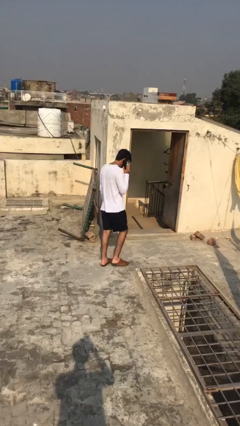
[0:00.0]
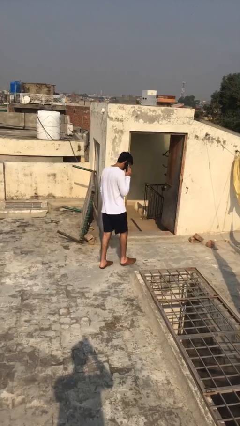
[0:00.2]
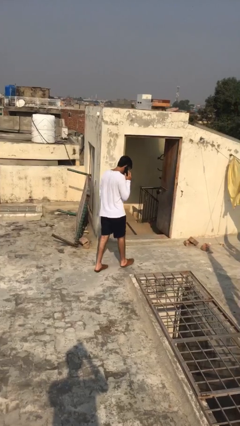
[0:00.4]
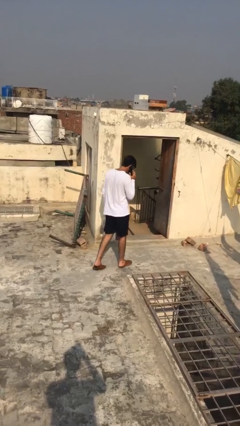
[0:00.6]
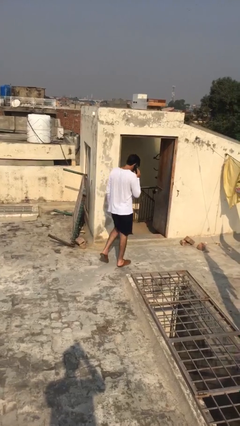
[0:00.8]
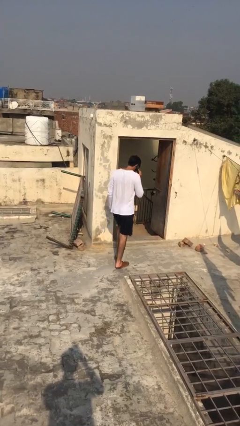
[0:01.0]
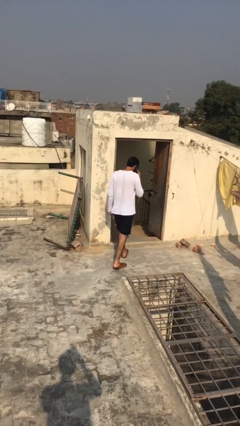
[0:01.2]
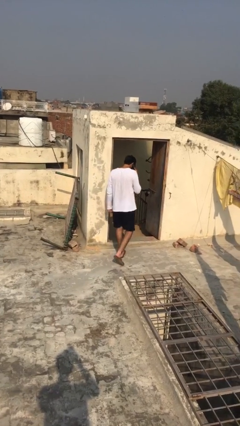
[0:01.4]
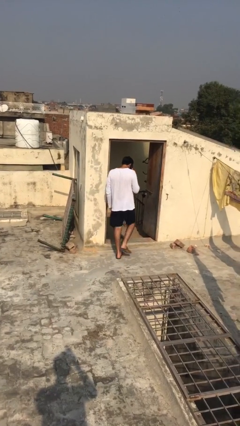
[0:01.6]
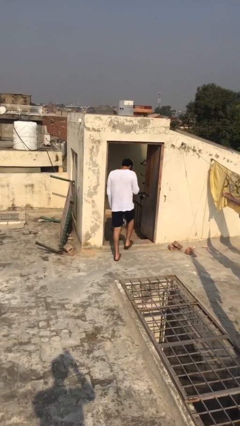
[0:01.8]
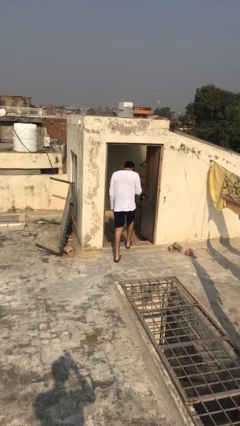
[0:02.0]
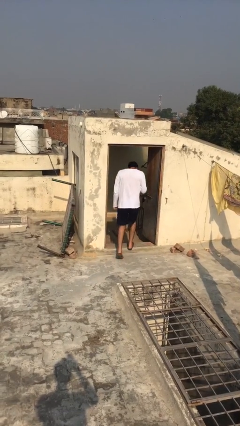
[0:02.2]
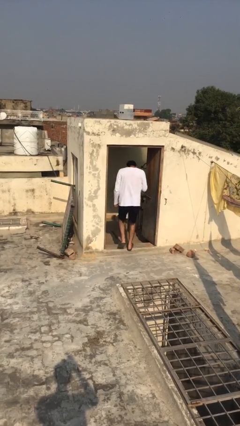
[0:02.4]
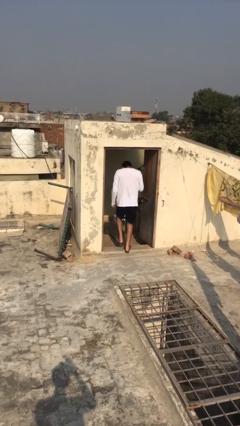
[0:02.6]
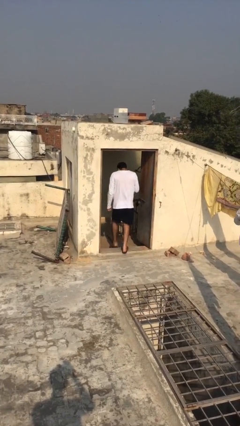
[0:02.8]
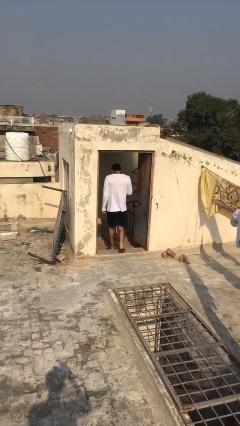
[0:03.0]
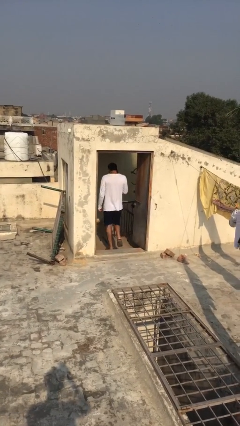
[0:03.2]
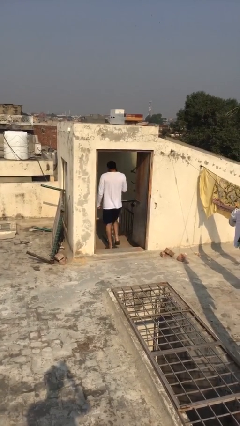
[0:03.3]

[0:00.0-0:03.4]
person exits scene through structure

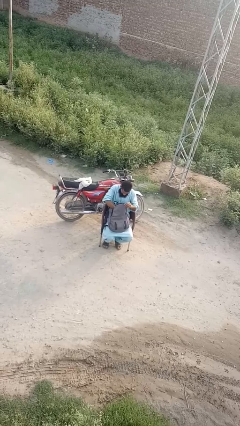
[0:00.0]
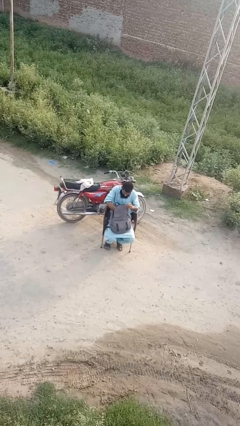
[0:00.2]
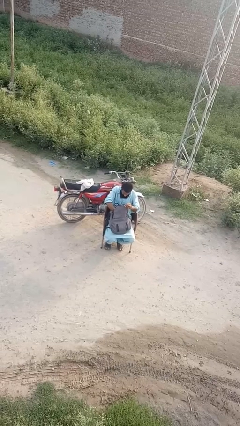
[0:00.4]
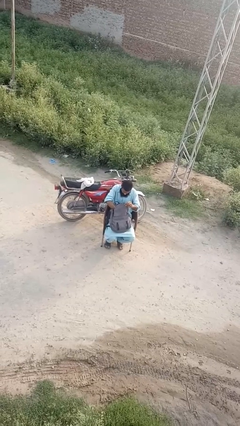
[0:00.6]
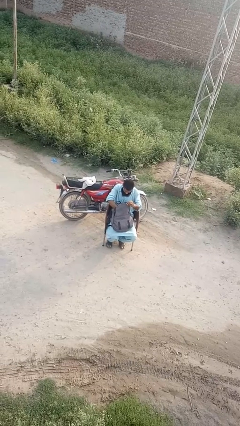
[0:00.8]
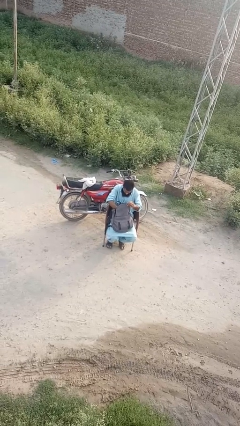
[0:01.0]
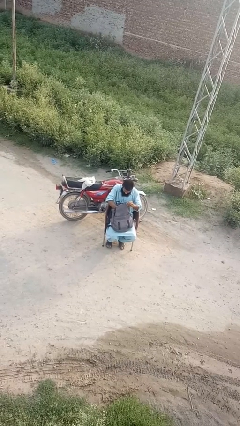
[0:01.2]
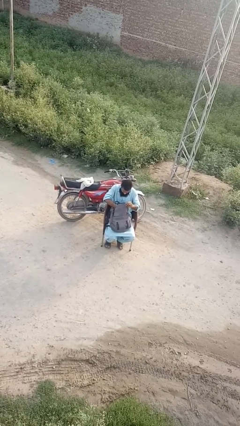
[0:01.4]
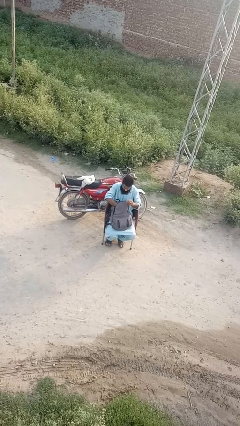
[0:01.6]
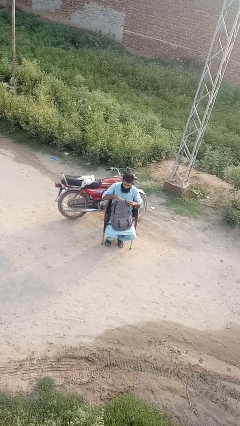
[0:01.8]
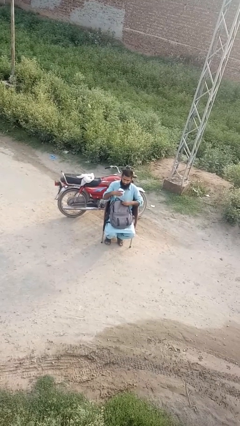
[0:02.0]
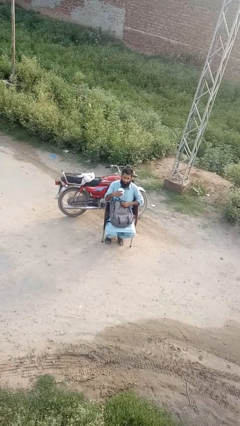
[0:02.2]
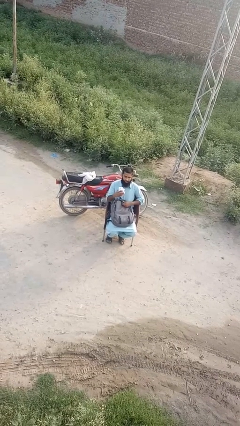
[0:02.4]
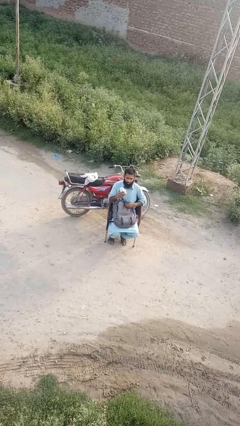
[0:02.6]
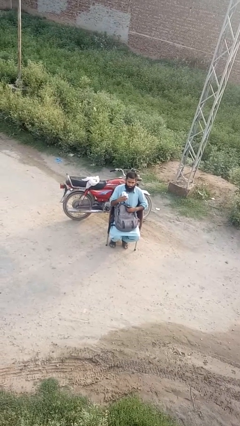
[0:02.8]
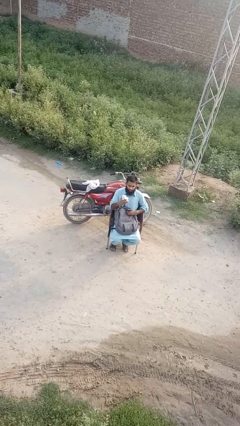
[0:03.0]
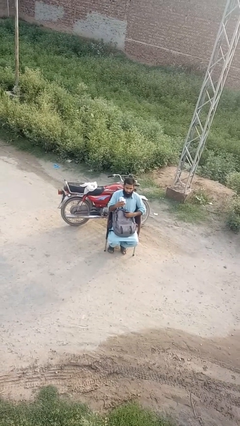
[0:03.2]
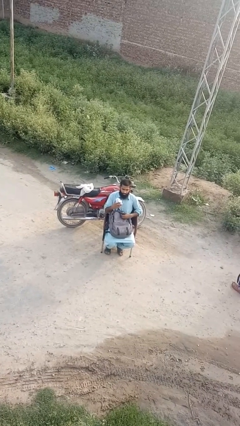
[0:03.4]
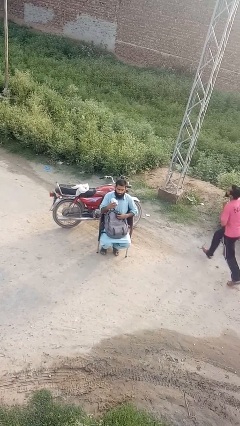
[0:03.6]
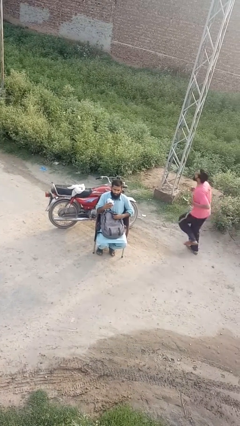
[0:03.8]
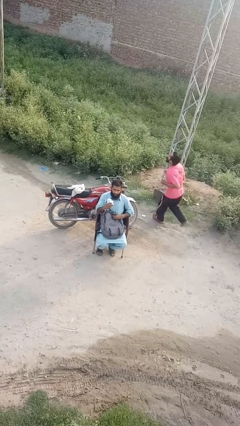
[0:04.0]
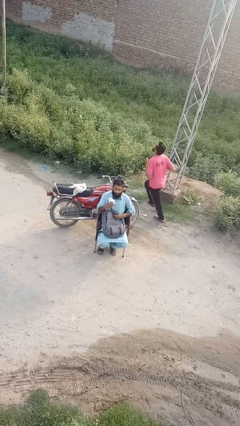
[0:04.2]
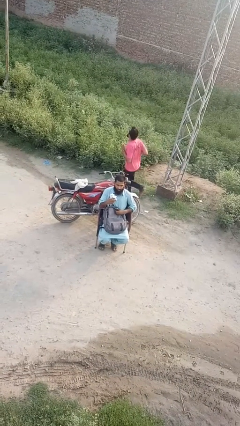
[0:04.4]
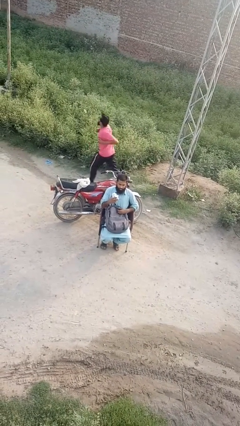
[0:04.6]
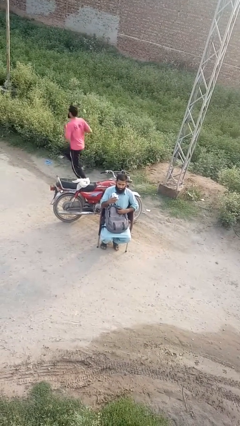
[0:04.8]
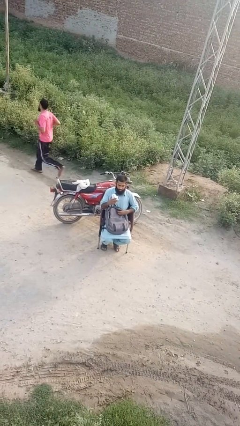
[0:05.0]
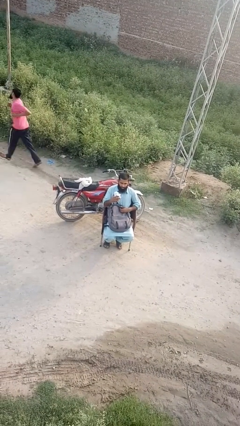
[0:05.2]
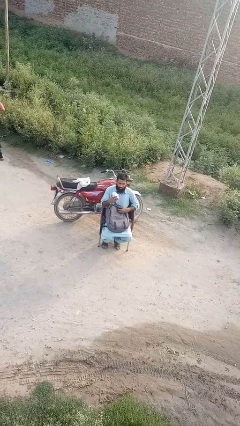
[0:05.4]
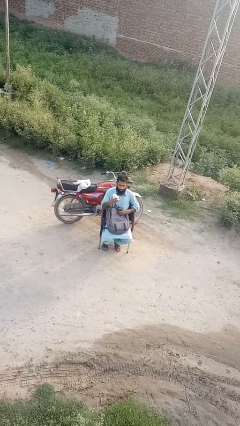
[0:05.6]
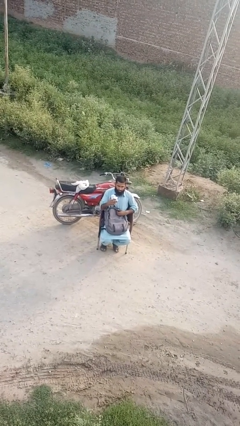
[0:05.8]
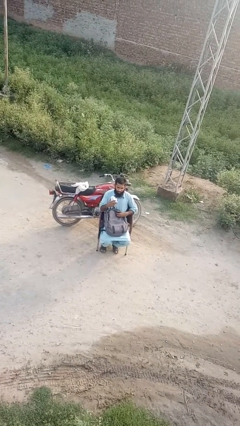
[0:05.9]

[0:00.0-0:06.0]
person takes object from backpack

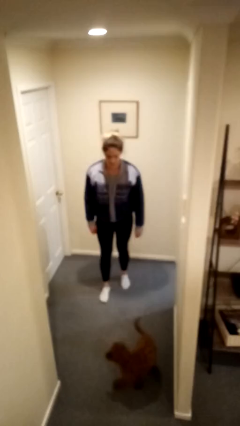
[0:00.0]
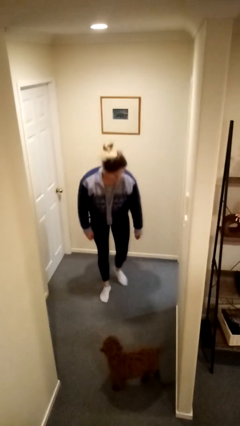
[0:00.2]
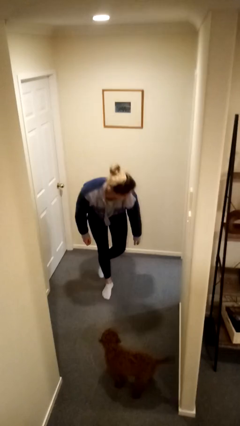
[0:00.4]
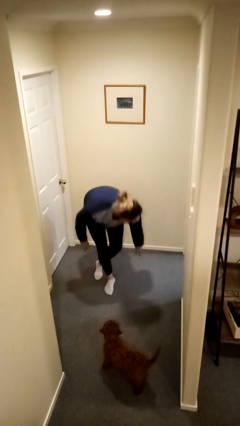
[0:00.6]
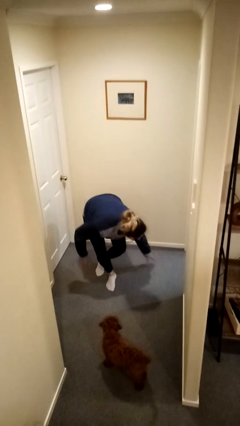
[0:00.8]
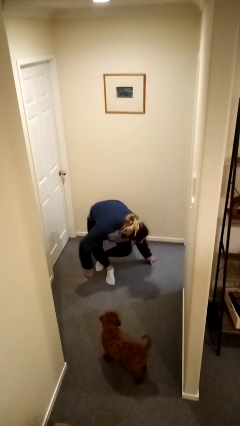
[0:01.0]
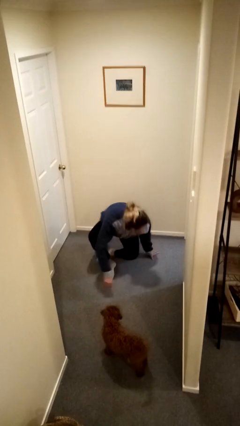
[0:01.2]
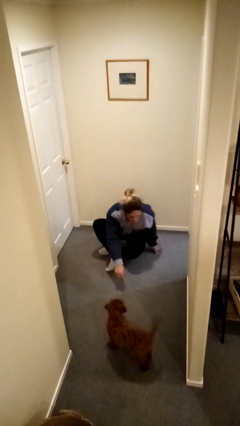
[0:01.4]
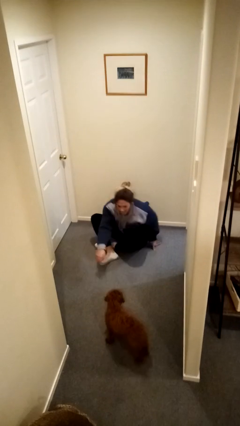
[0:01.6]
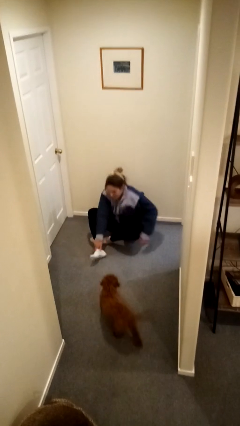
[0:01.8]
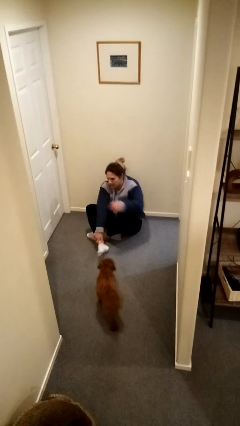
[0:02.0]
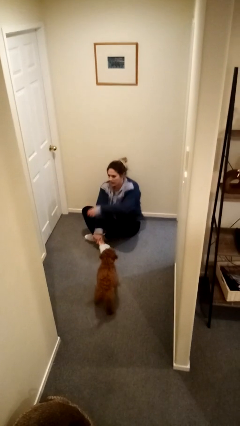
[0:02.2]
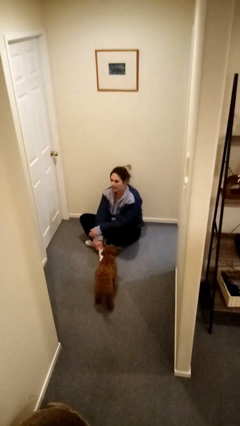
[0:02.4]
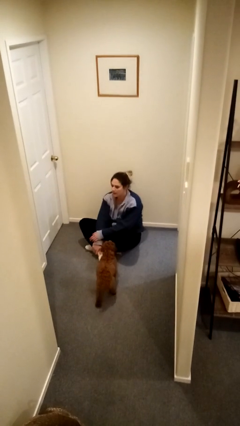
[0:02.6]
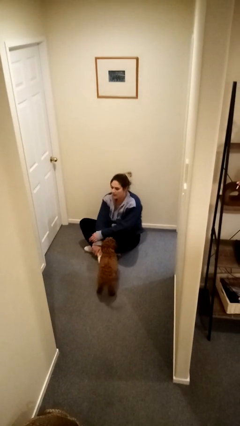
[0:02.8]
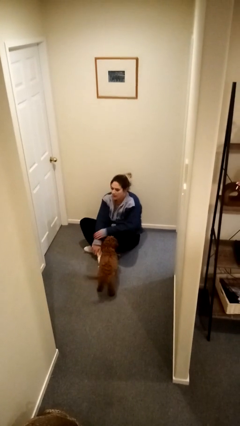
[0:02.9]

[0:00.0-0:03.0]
person sits crisscross

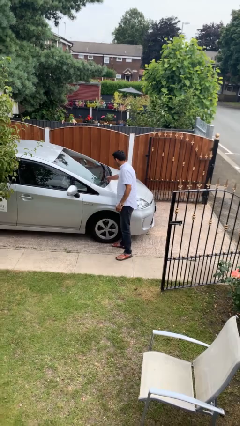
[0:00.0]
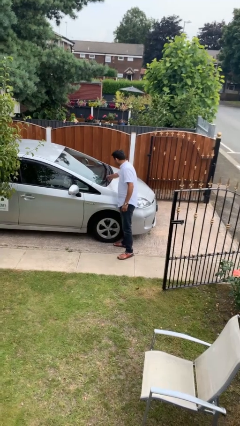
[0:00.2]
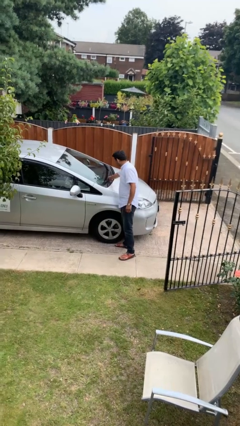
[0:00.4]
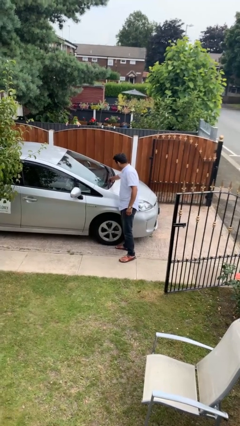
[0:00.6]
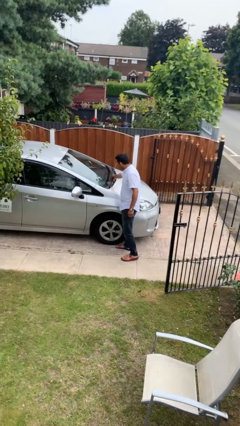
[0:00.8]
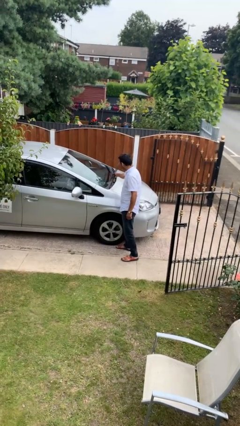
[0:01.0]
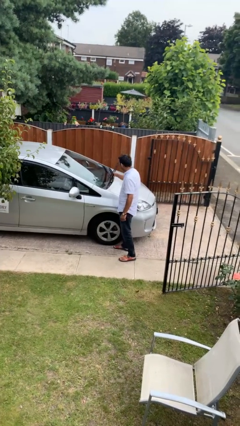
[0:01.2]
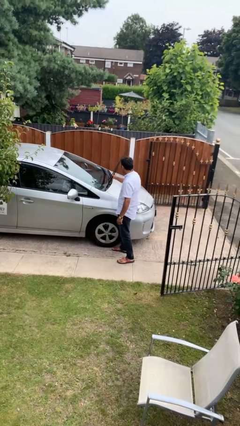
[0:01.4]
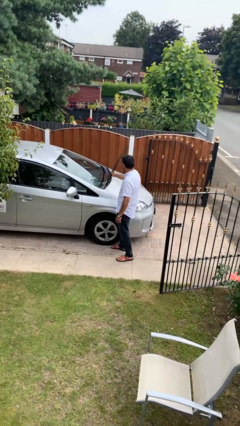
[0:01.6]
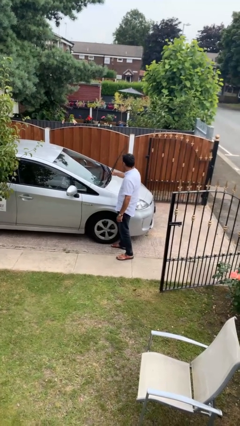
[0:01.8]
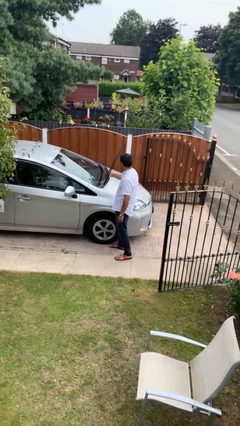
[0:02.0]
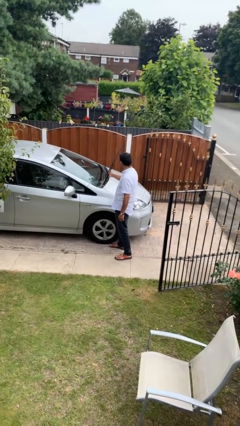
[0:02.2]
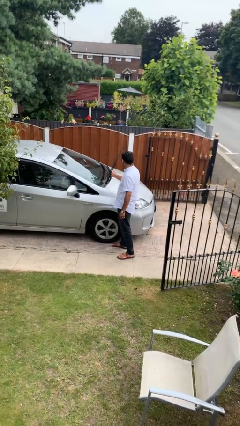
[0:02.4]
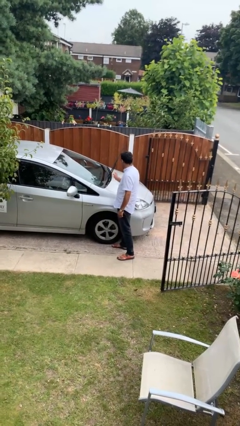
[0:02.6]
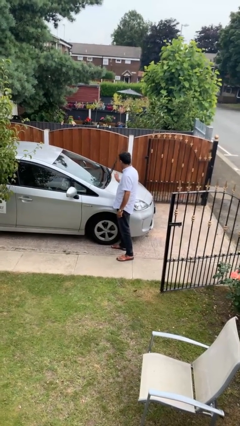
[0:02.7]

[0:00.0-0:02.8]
person flips up car wipers

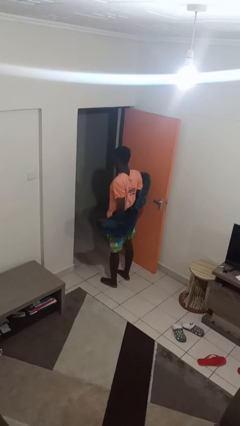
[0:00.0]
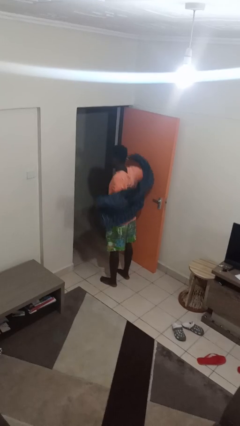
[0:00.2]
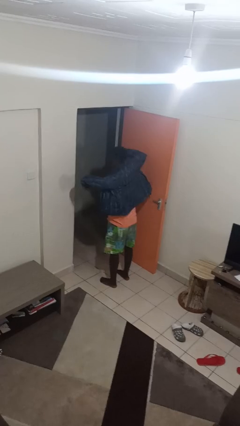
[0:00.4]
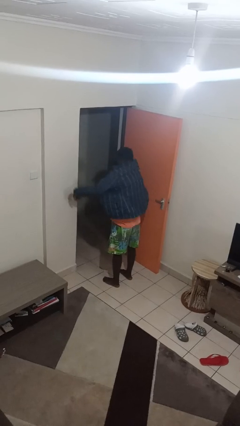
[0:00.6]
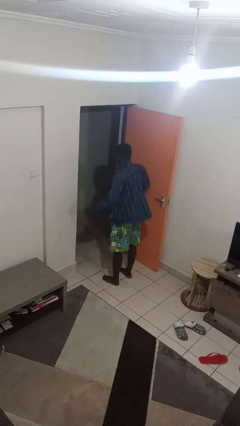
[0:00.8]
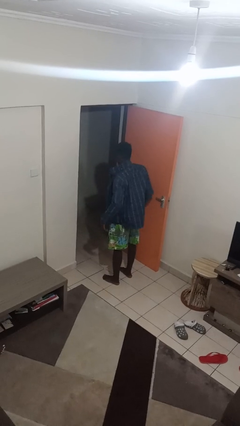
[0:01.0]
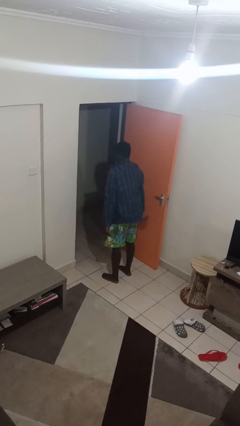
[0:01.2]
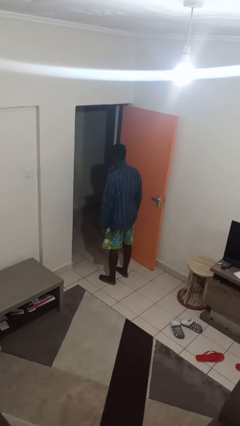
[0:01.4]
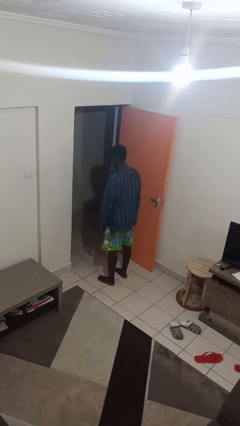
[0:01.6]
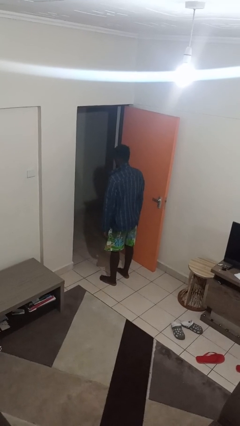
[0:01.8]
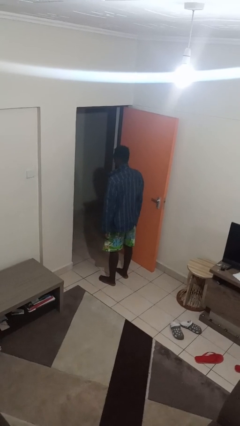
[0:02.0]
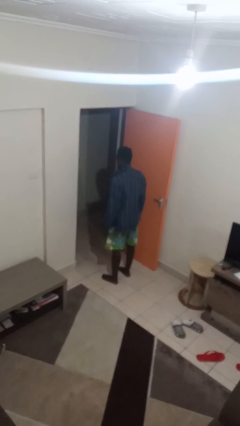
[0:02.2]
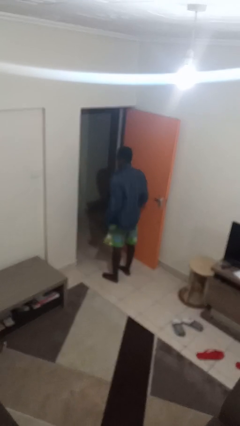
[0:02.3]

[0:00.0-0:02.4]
person puts on jacket
